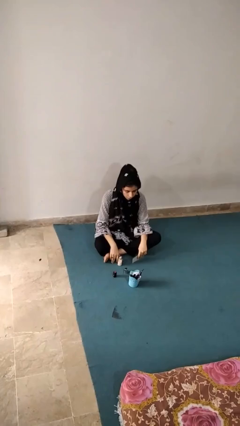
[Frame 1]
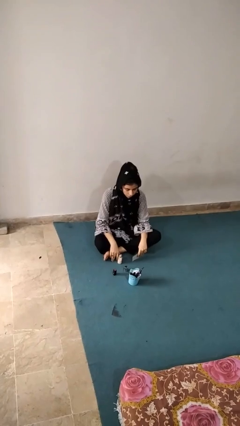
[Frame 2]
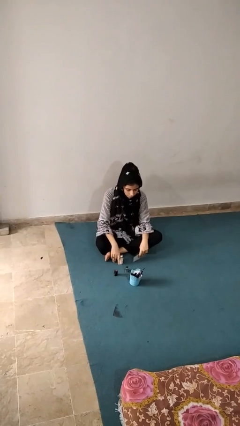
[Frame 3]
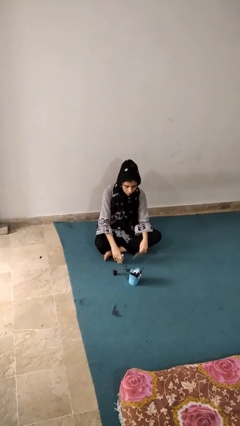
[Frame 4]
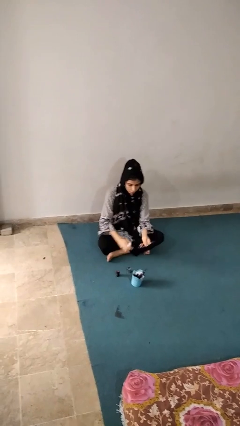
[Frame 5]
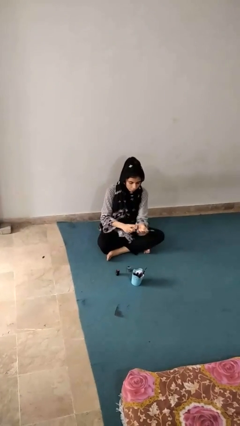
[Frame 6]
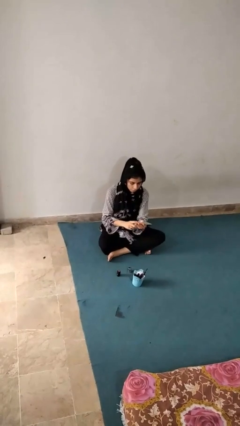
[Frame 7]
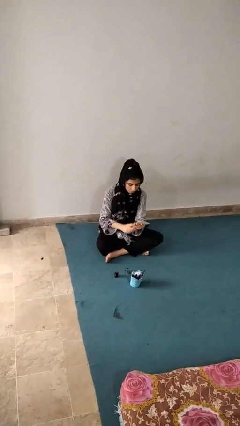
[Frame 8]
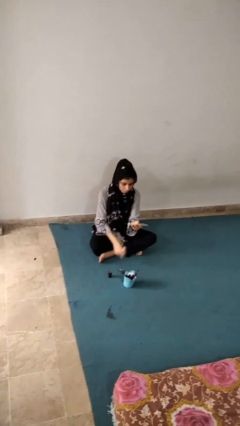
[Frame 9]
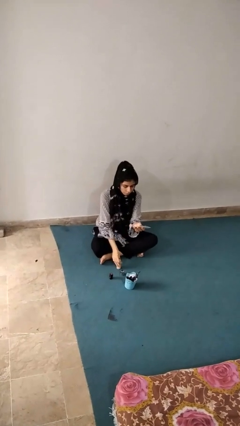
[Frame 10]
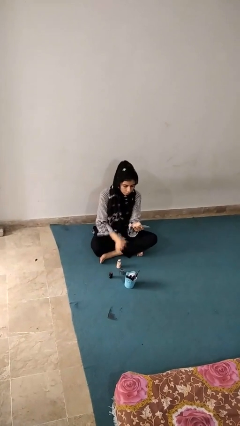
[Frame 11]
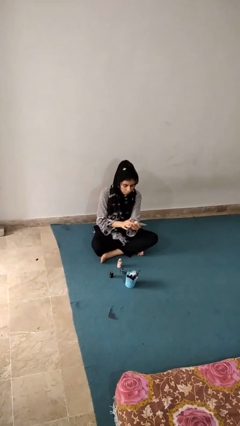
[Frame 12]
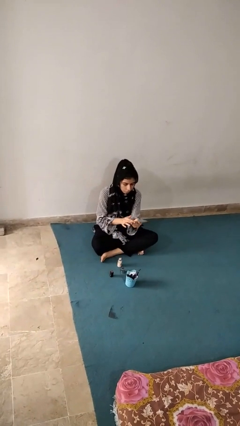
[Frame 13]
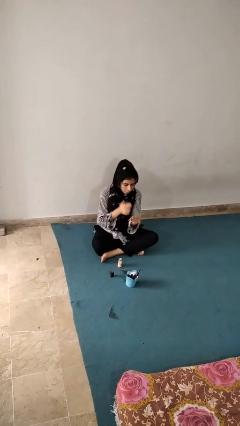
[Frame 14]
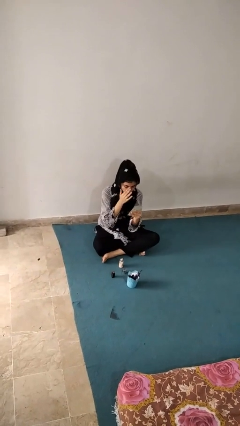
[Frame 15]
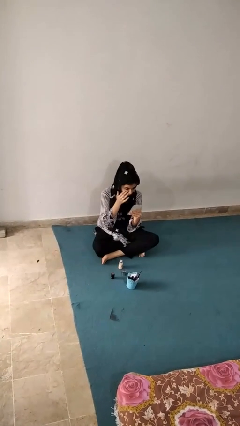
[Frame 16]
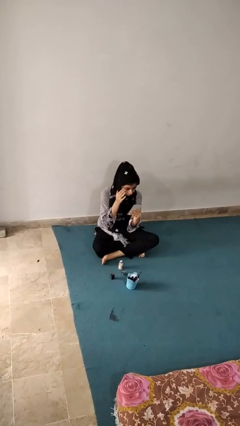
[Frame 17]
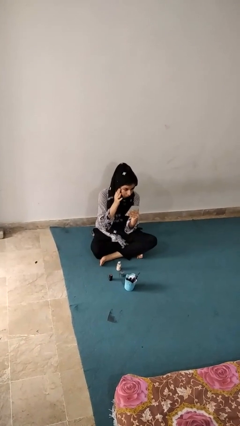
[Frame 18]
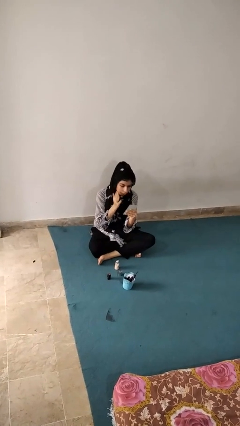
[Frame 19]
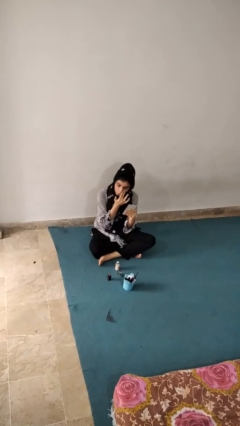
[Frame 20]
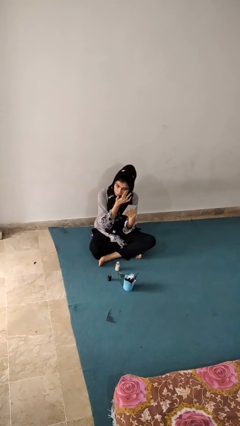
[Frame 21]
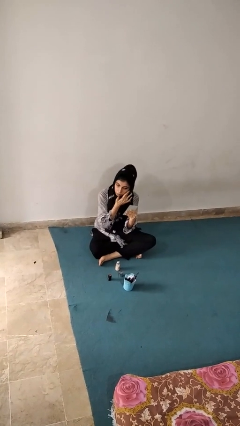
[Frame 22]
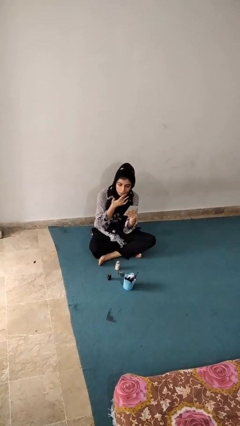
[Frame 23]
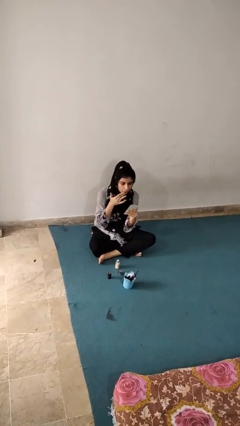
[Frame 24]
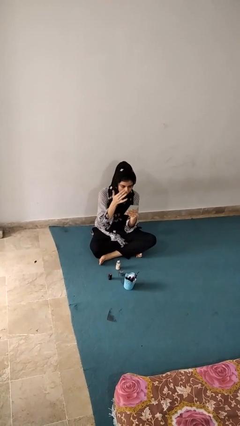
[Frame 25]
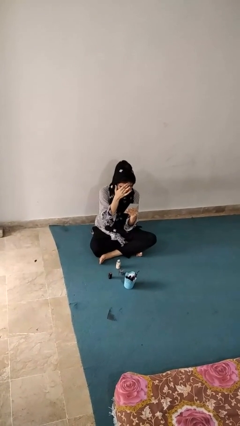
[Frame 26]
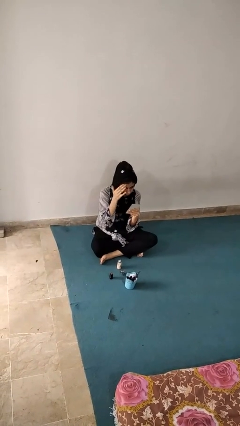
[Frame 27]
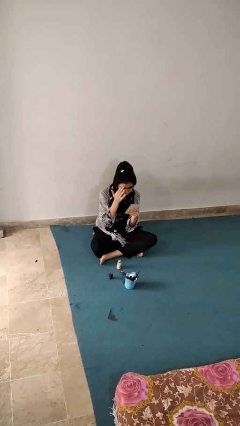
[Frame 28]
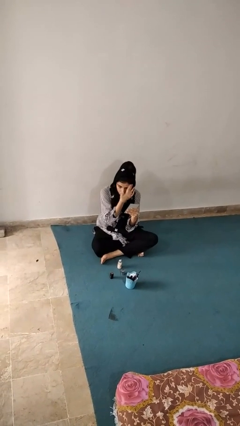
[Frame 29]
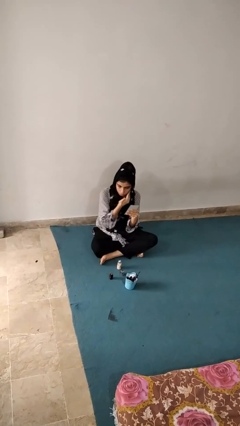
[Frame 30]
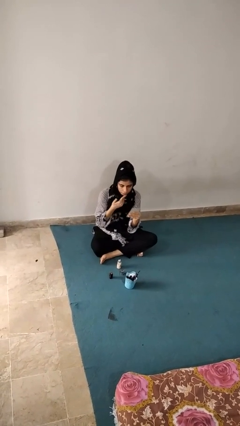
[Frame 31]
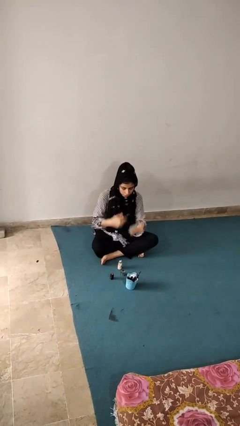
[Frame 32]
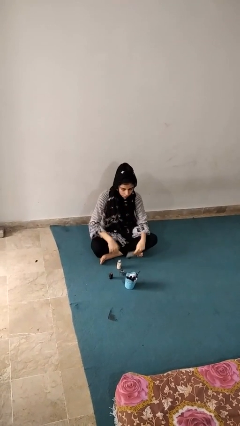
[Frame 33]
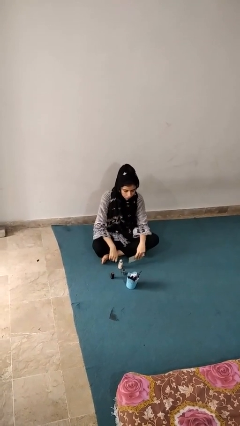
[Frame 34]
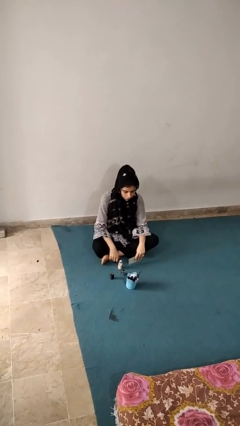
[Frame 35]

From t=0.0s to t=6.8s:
person applies foundation makeup

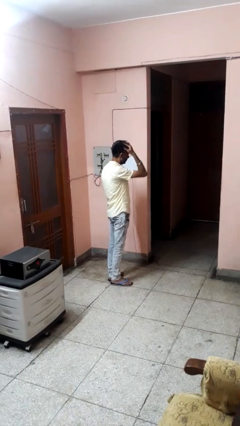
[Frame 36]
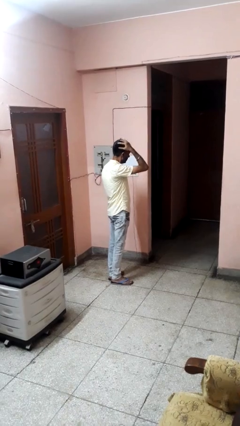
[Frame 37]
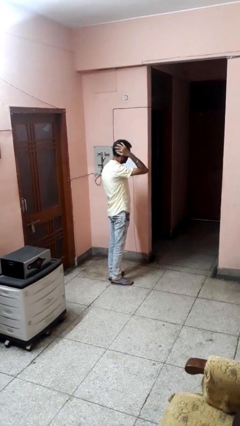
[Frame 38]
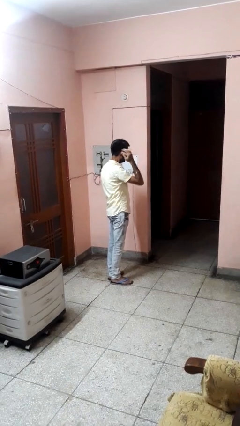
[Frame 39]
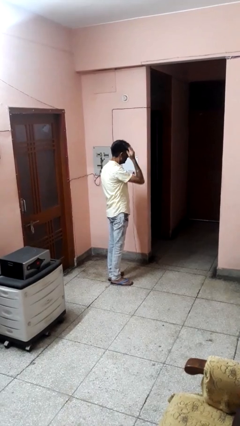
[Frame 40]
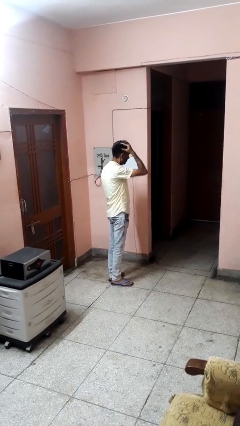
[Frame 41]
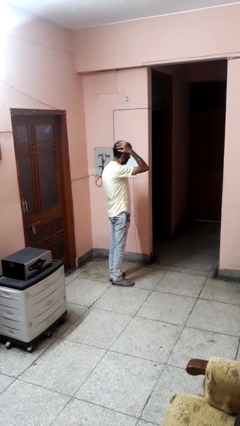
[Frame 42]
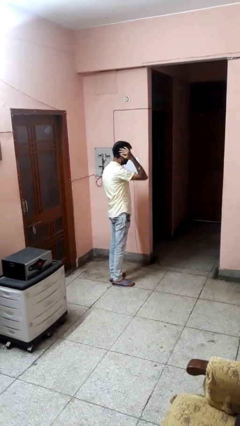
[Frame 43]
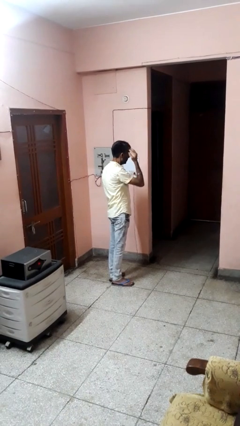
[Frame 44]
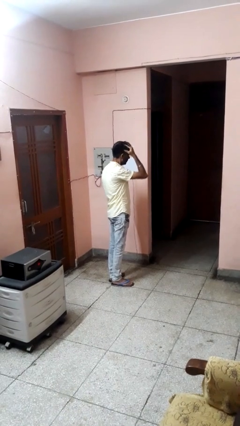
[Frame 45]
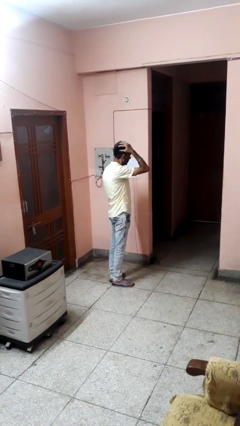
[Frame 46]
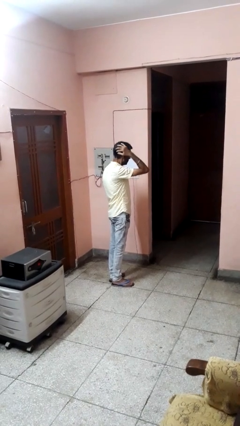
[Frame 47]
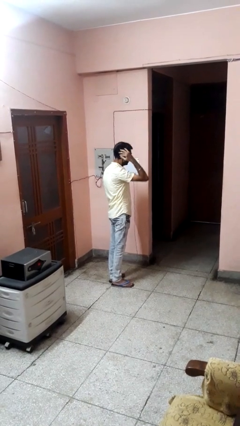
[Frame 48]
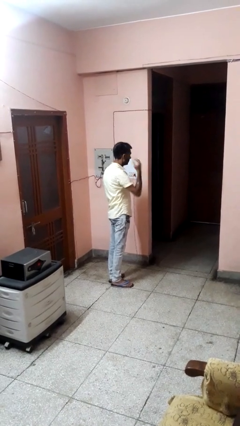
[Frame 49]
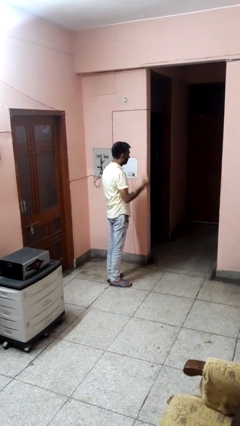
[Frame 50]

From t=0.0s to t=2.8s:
person strokes hair

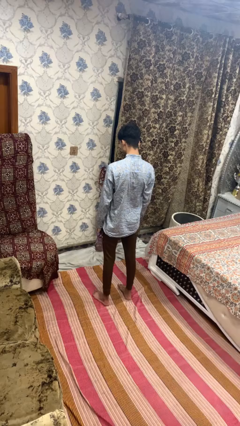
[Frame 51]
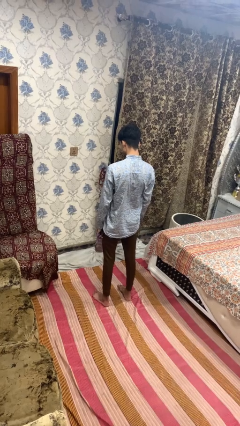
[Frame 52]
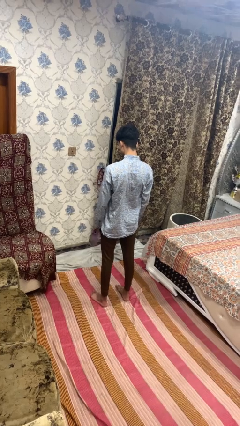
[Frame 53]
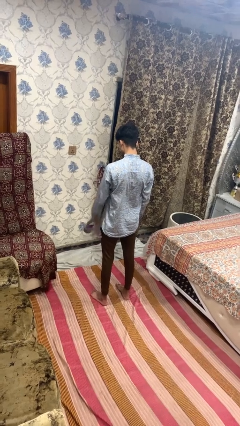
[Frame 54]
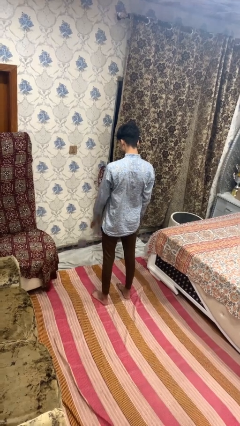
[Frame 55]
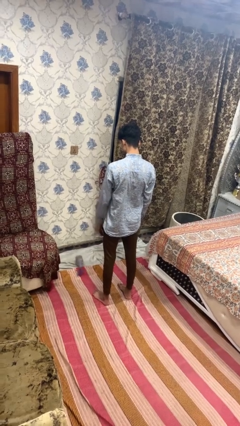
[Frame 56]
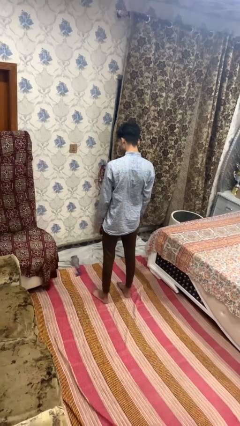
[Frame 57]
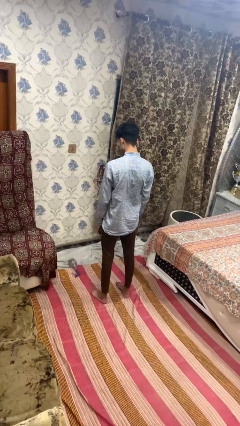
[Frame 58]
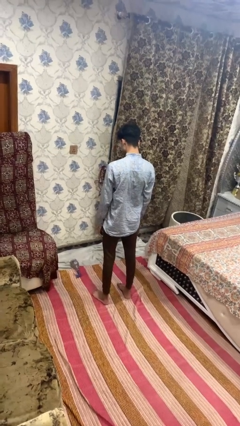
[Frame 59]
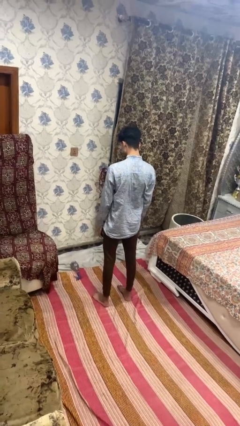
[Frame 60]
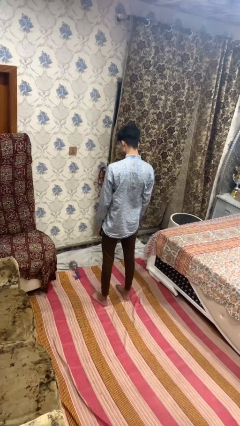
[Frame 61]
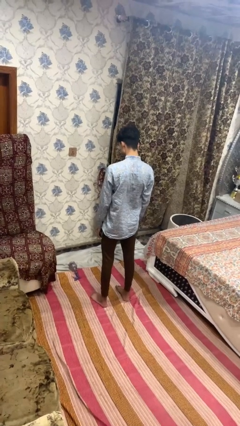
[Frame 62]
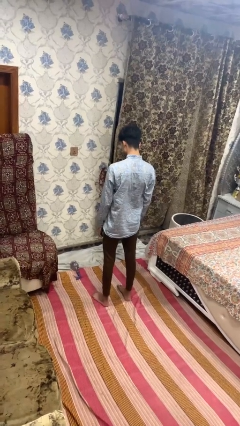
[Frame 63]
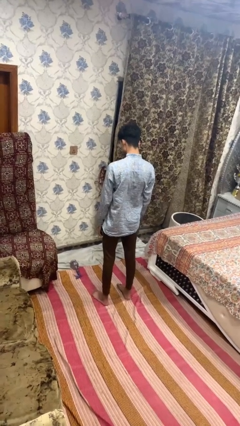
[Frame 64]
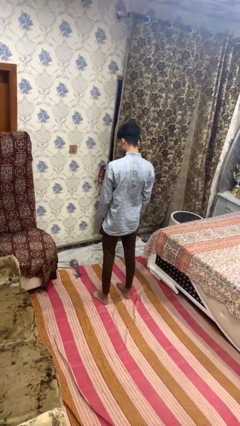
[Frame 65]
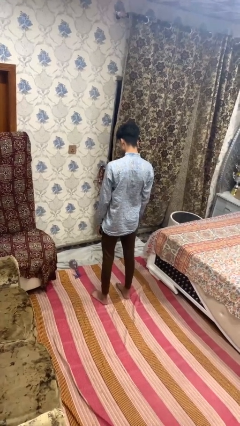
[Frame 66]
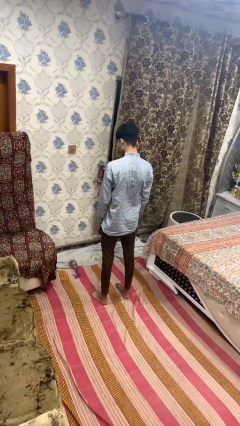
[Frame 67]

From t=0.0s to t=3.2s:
person throws object to ground

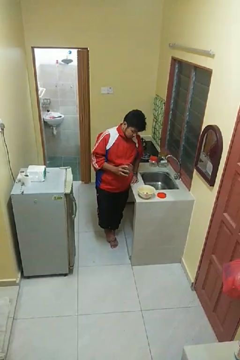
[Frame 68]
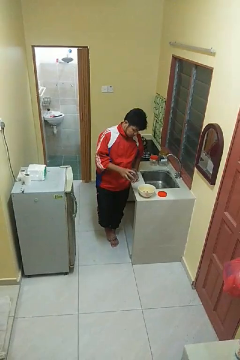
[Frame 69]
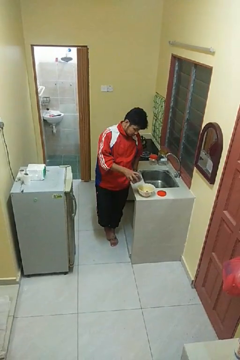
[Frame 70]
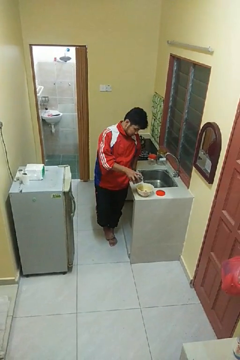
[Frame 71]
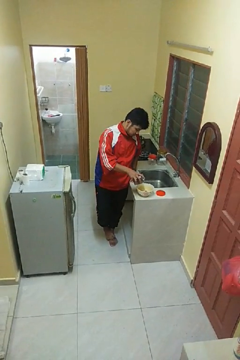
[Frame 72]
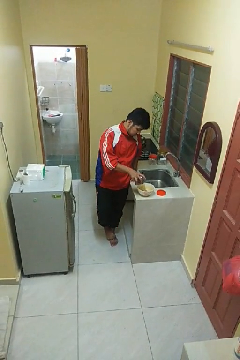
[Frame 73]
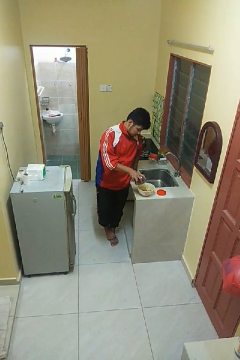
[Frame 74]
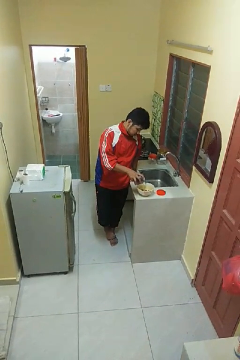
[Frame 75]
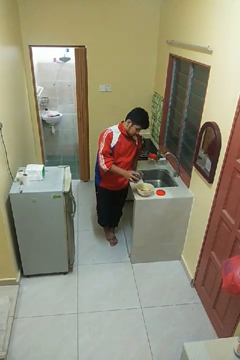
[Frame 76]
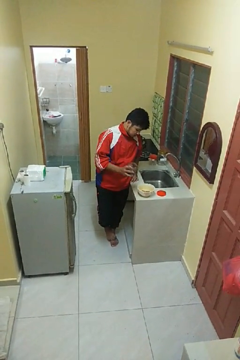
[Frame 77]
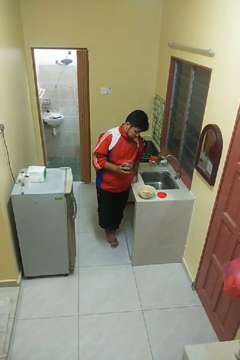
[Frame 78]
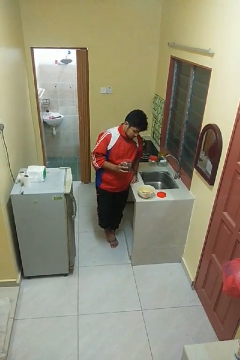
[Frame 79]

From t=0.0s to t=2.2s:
person pours into bowl

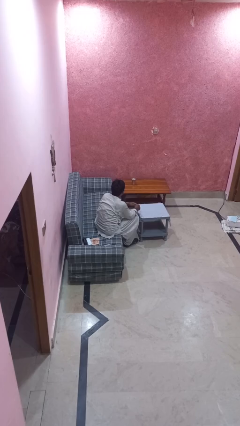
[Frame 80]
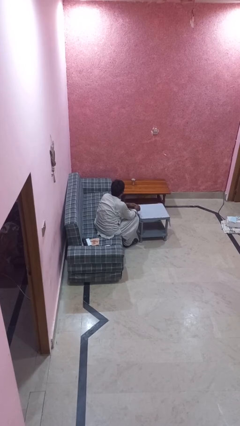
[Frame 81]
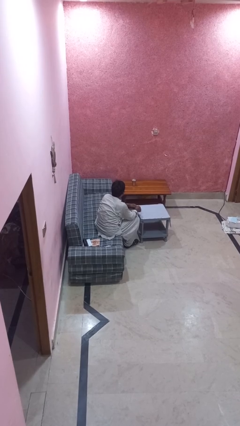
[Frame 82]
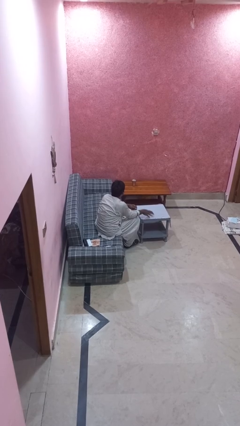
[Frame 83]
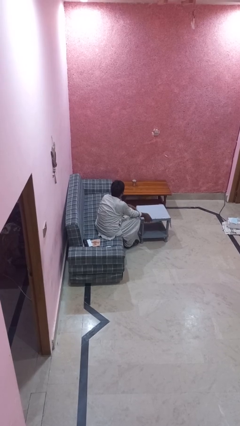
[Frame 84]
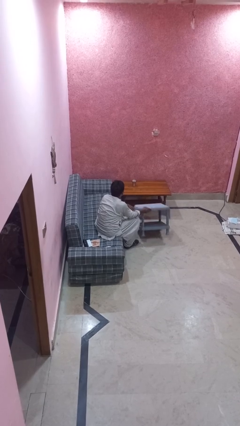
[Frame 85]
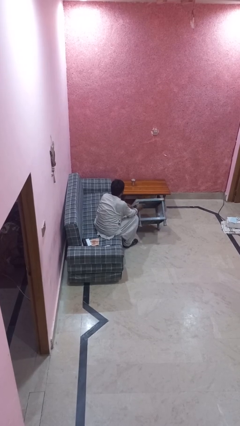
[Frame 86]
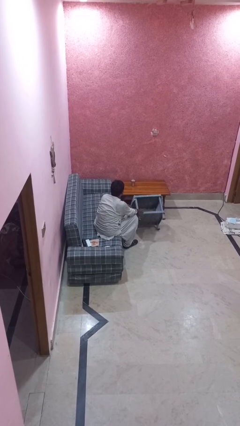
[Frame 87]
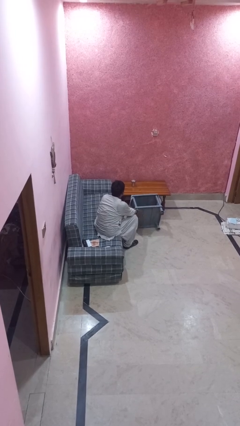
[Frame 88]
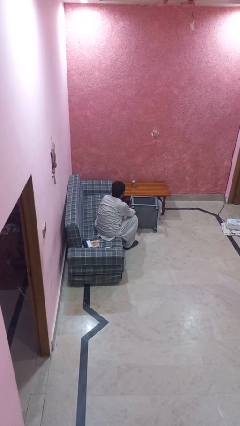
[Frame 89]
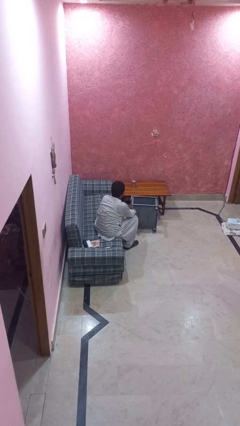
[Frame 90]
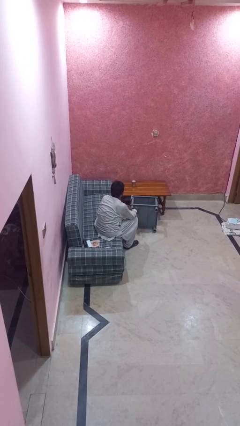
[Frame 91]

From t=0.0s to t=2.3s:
person knocks over furniture

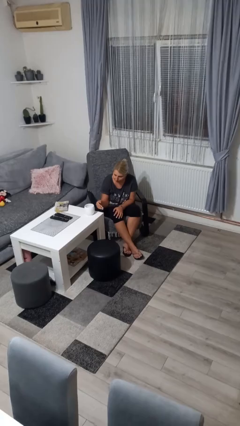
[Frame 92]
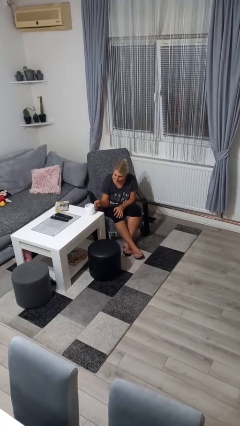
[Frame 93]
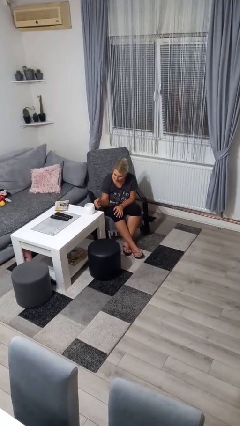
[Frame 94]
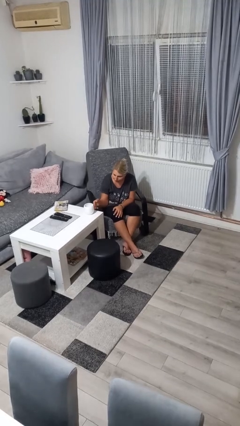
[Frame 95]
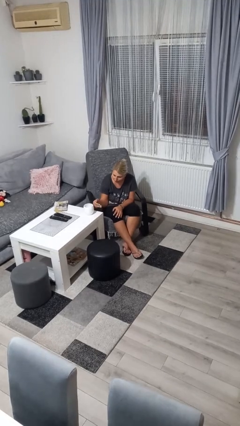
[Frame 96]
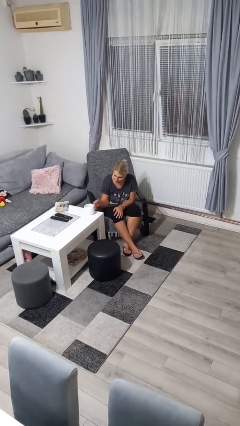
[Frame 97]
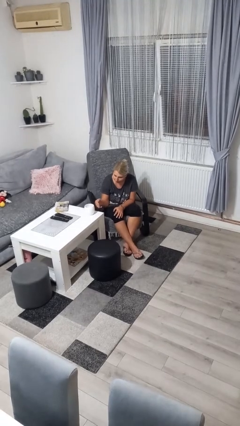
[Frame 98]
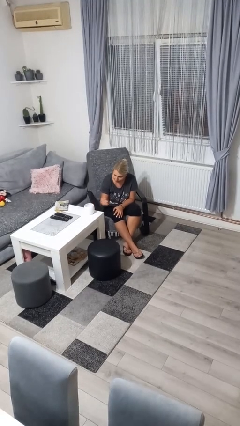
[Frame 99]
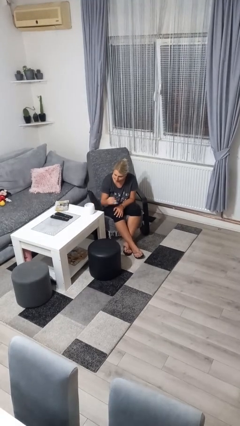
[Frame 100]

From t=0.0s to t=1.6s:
person taps object with finger
